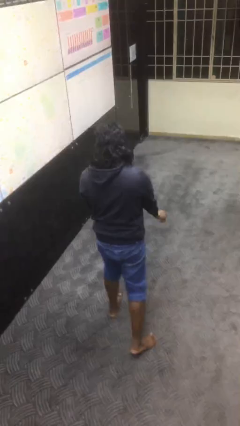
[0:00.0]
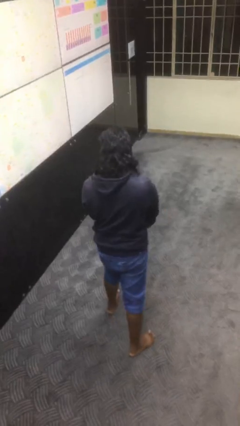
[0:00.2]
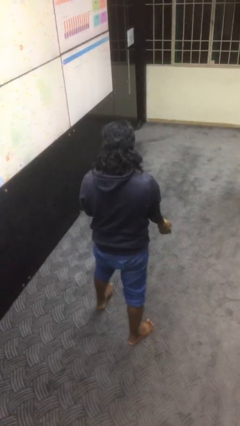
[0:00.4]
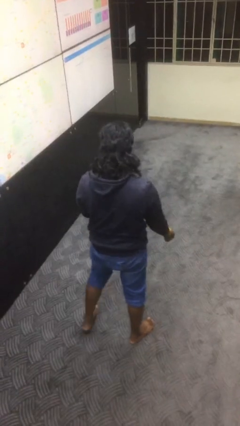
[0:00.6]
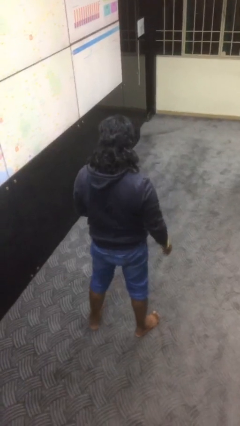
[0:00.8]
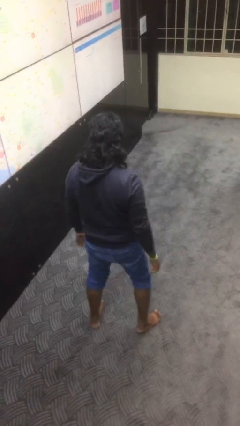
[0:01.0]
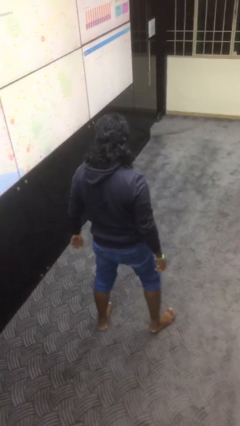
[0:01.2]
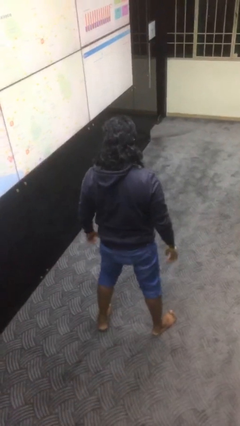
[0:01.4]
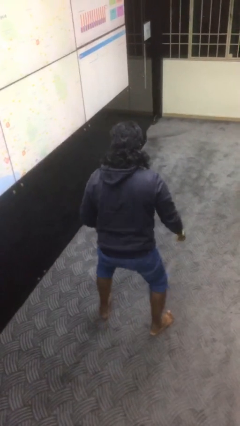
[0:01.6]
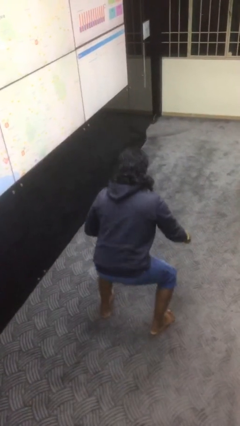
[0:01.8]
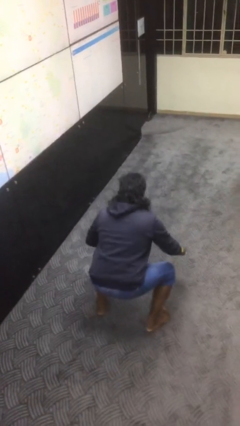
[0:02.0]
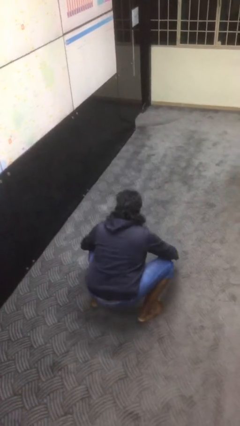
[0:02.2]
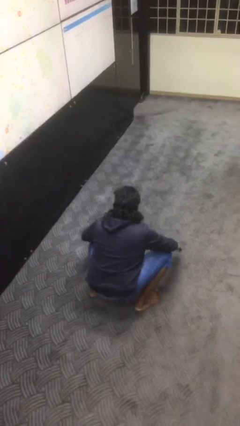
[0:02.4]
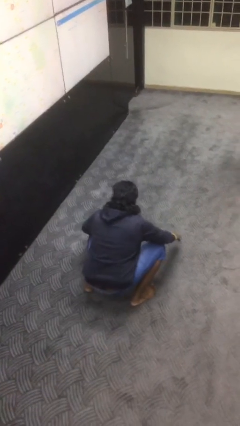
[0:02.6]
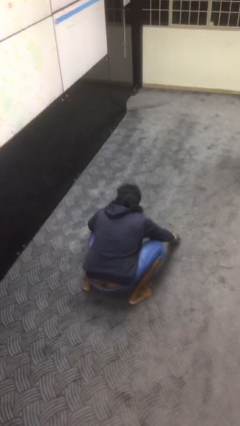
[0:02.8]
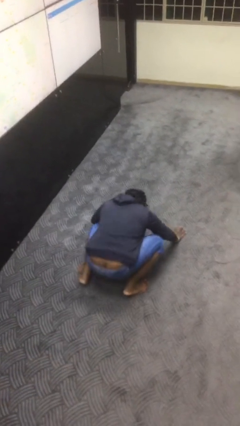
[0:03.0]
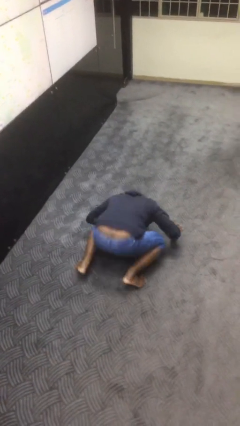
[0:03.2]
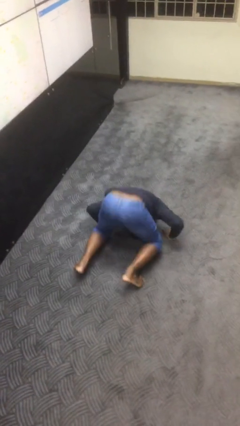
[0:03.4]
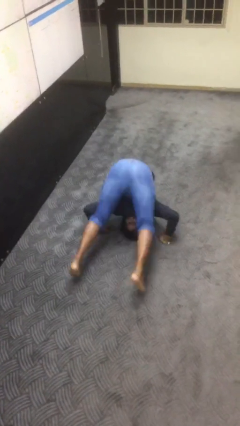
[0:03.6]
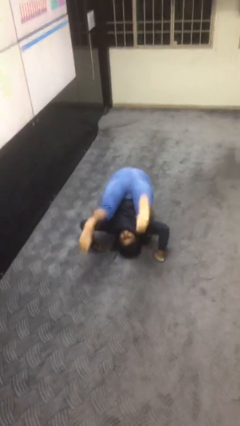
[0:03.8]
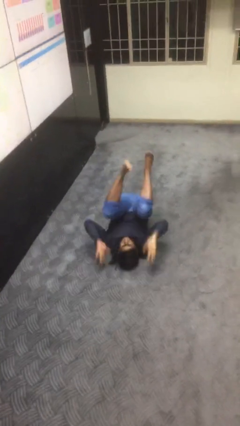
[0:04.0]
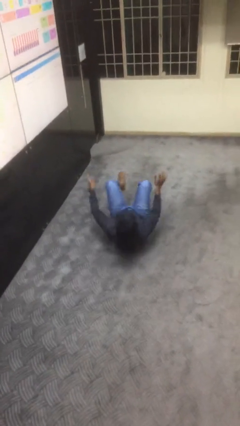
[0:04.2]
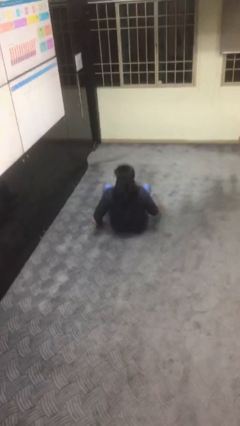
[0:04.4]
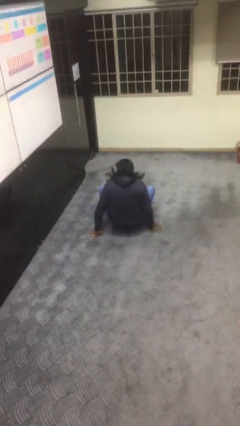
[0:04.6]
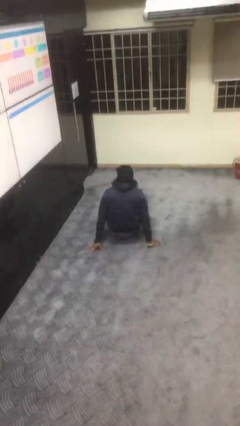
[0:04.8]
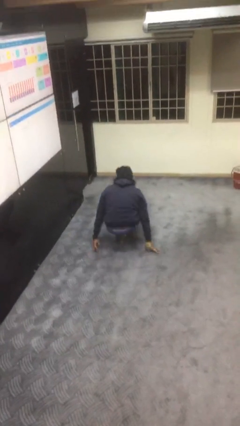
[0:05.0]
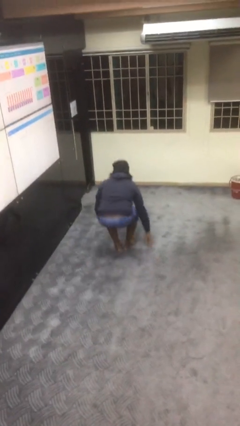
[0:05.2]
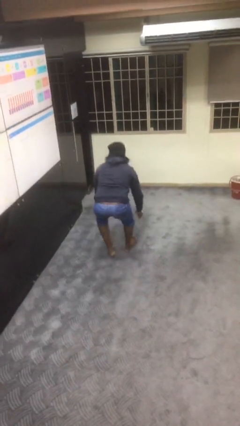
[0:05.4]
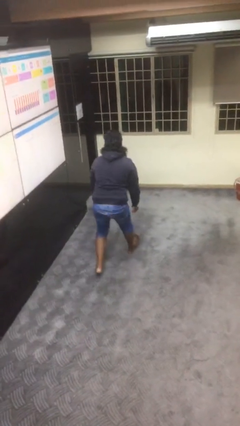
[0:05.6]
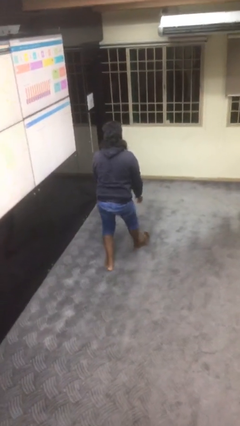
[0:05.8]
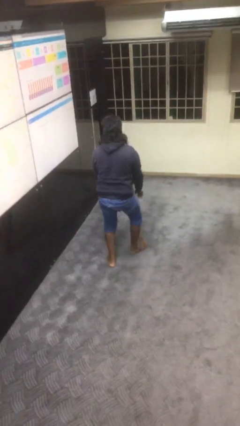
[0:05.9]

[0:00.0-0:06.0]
person somersaults

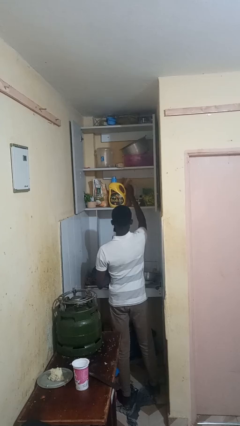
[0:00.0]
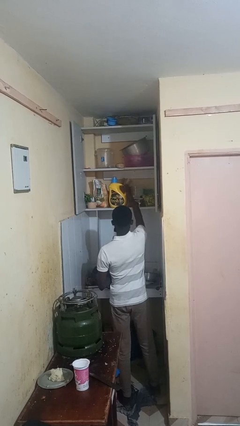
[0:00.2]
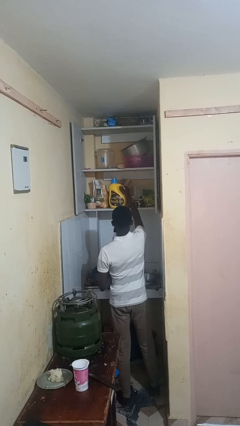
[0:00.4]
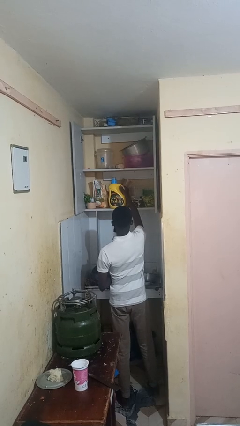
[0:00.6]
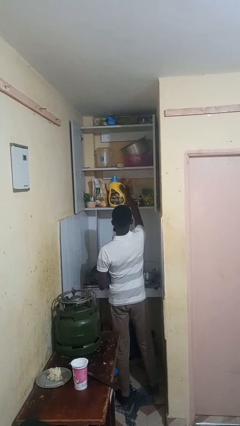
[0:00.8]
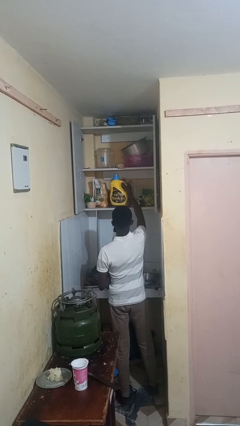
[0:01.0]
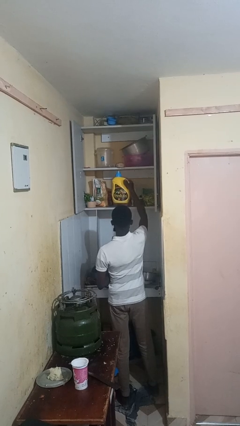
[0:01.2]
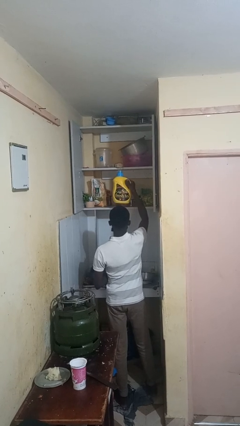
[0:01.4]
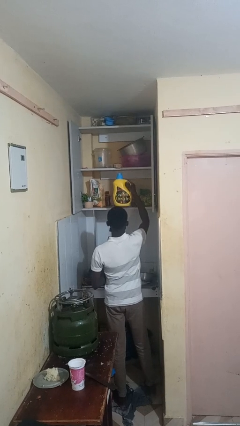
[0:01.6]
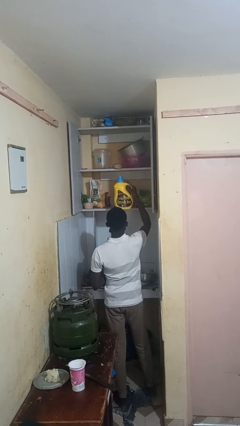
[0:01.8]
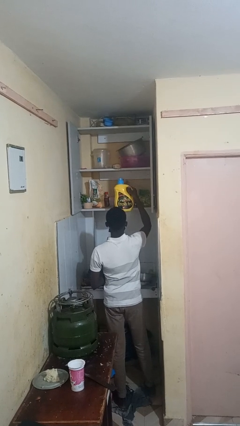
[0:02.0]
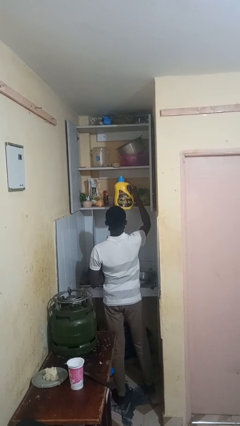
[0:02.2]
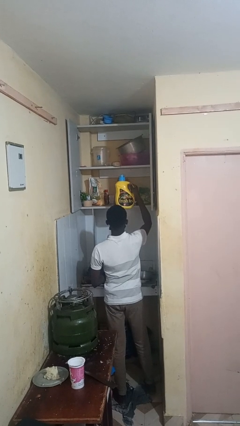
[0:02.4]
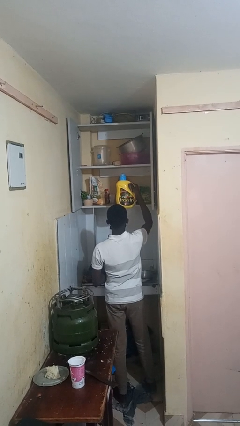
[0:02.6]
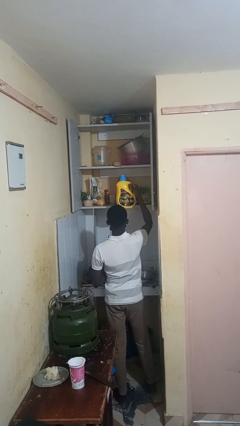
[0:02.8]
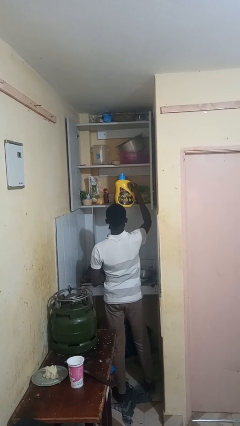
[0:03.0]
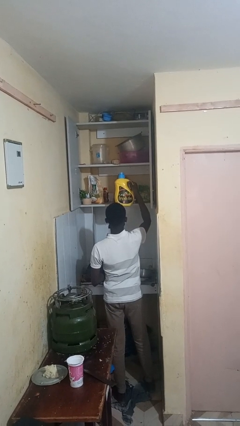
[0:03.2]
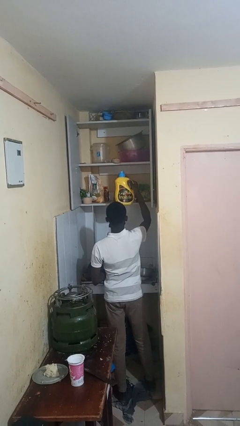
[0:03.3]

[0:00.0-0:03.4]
person picks up object from countertop

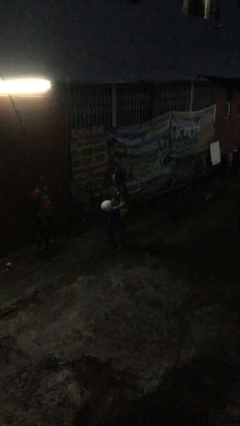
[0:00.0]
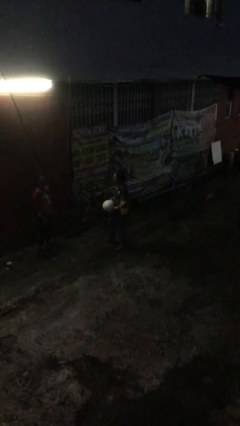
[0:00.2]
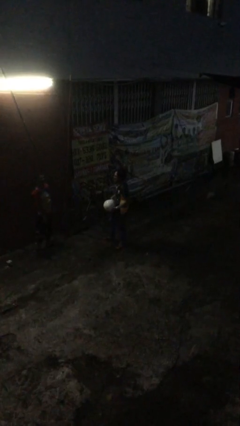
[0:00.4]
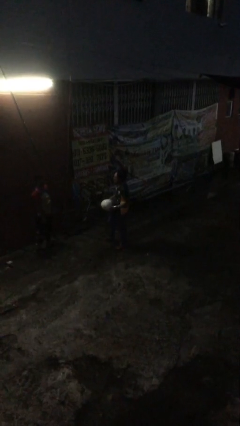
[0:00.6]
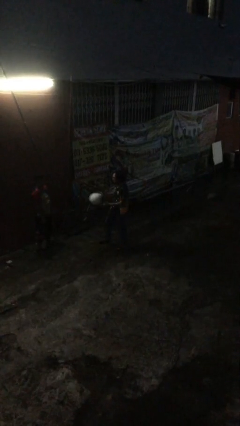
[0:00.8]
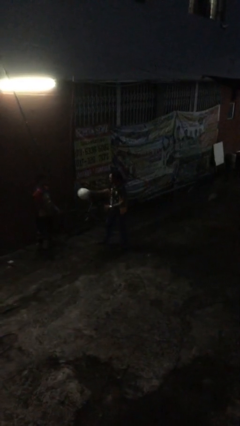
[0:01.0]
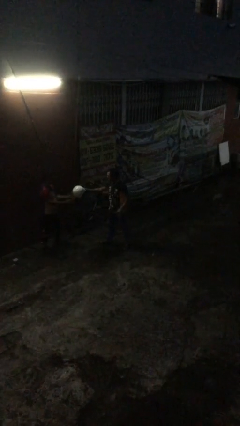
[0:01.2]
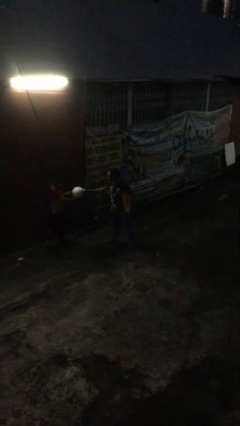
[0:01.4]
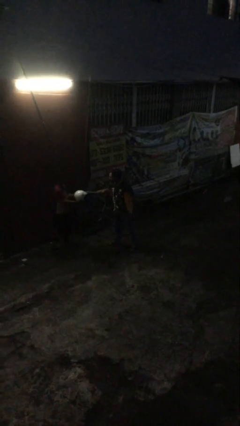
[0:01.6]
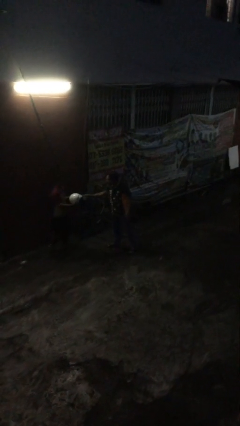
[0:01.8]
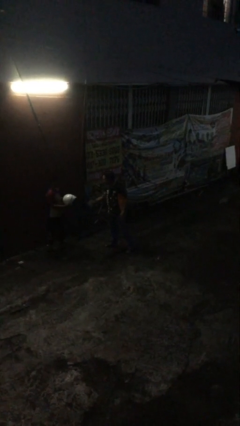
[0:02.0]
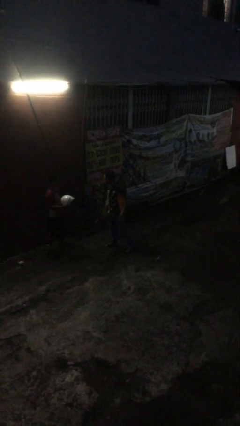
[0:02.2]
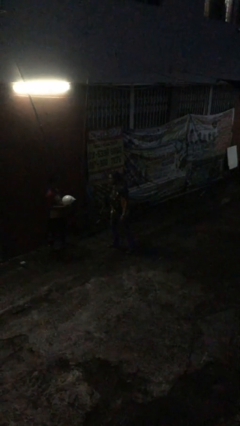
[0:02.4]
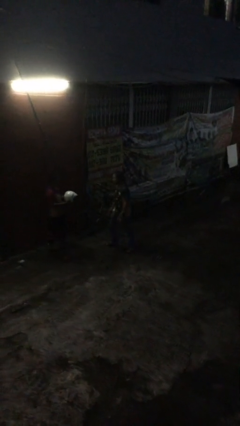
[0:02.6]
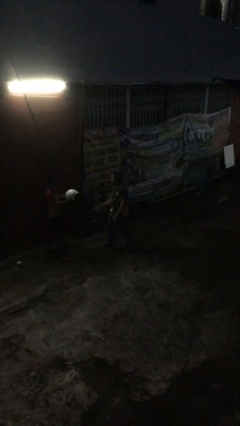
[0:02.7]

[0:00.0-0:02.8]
person transfers object to person

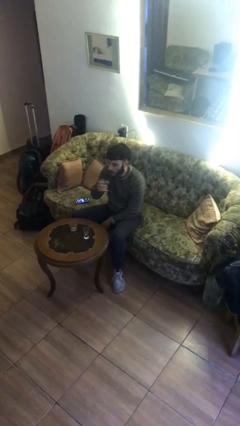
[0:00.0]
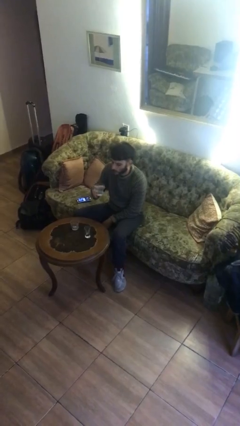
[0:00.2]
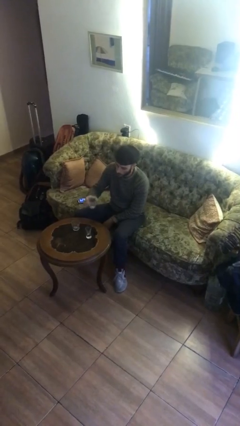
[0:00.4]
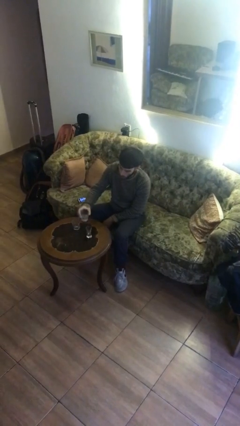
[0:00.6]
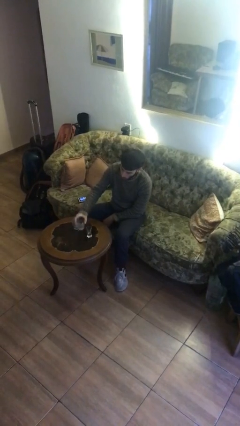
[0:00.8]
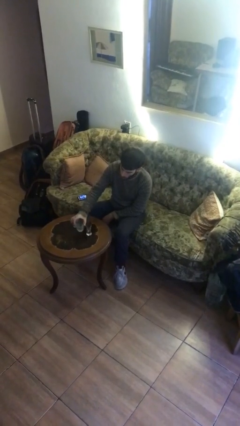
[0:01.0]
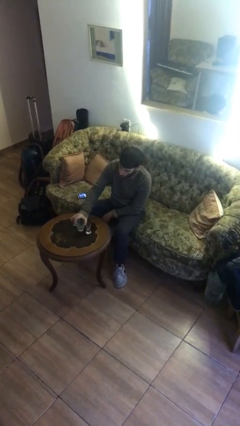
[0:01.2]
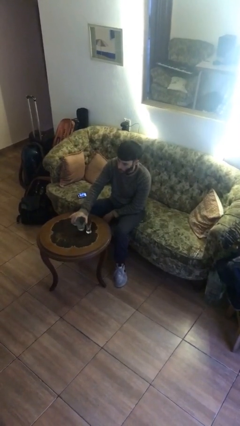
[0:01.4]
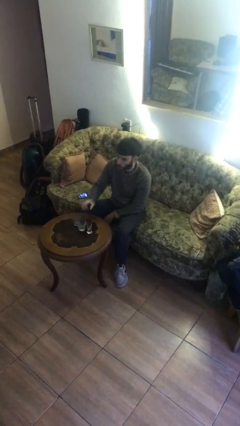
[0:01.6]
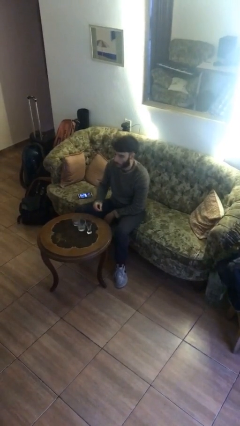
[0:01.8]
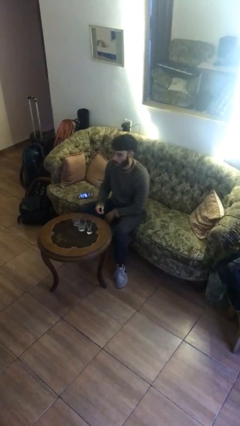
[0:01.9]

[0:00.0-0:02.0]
person puts down object on table

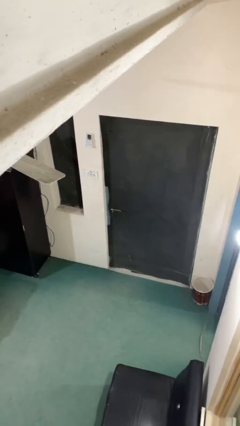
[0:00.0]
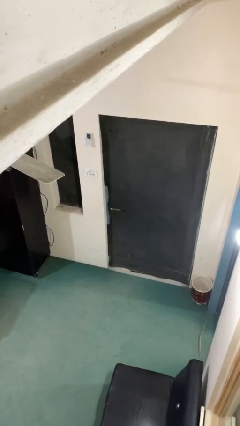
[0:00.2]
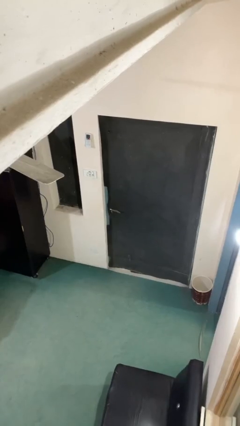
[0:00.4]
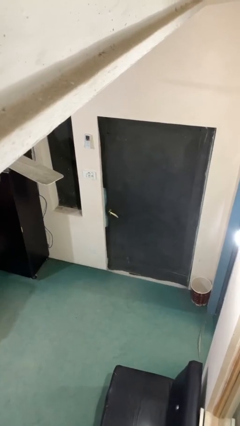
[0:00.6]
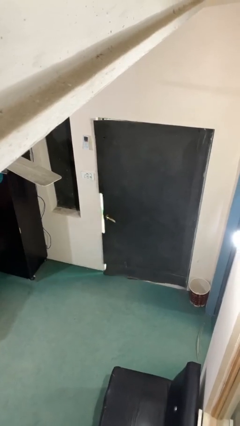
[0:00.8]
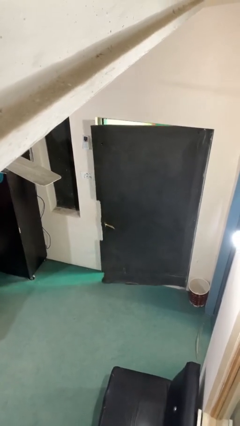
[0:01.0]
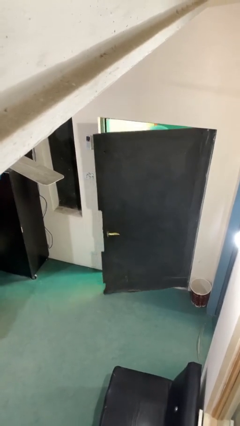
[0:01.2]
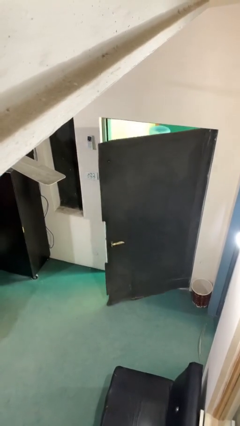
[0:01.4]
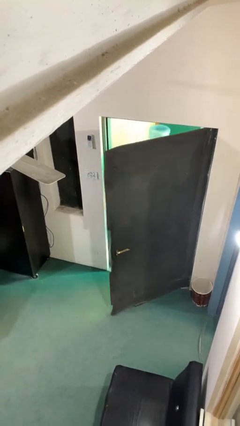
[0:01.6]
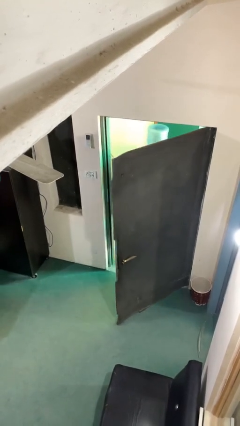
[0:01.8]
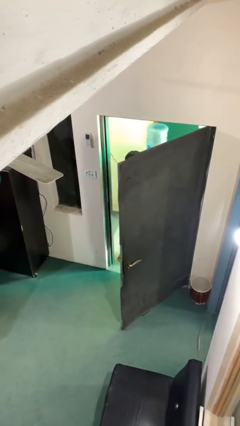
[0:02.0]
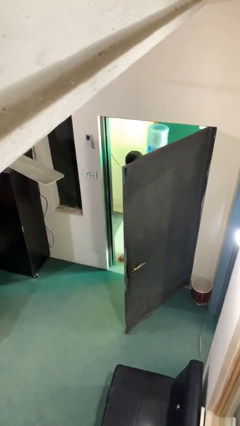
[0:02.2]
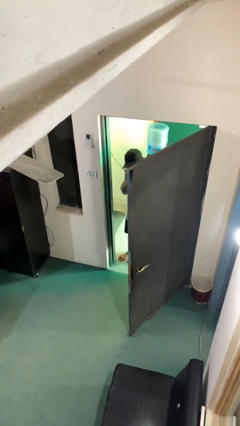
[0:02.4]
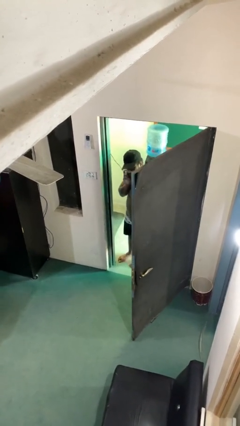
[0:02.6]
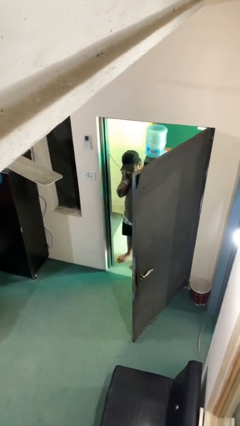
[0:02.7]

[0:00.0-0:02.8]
person opens facility door

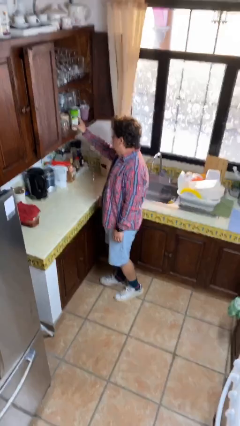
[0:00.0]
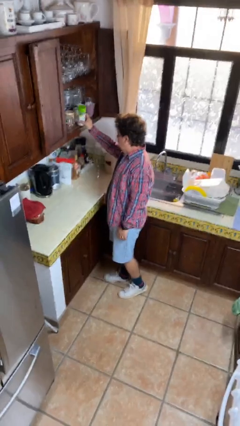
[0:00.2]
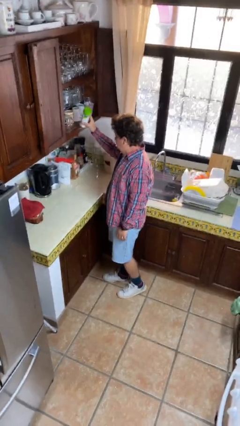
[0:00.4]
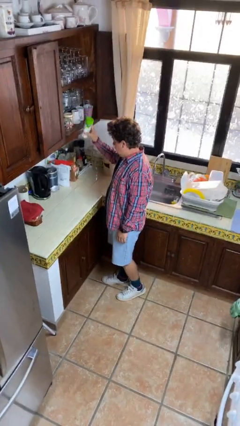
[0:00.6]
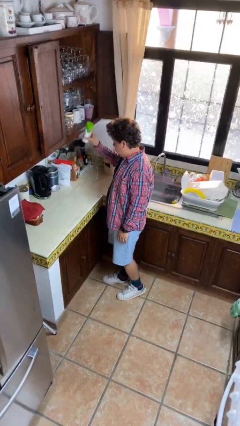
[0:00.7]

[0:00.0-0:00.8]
person picks up object from shelf
